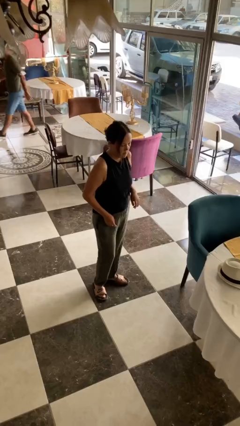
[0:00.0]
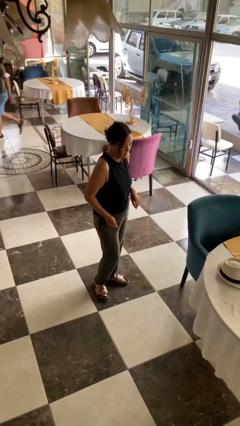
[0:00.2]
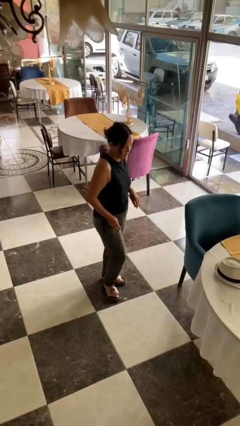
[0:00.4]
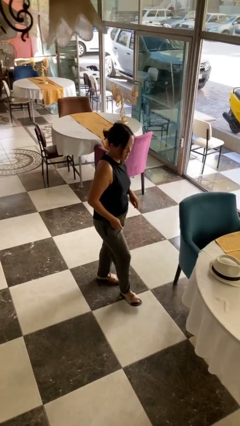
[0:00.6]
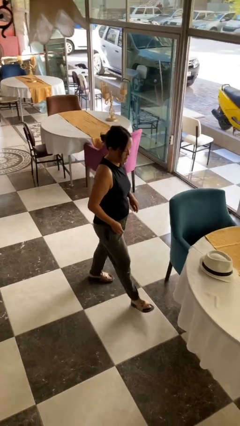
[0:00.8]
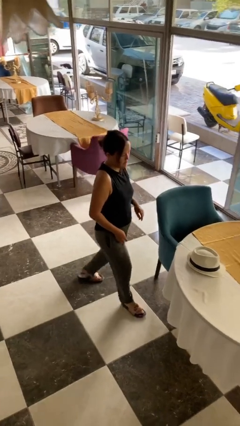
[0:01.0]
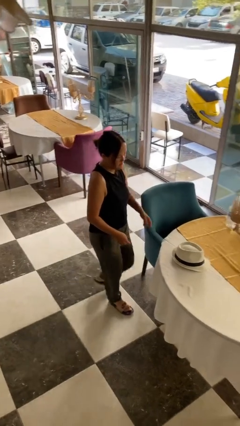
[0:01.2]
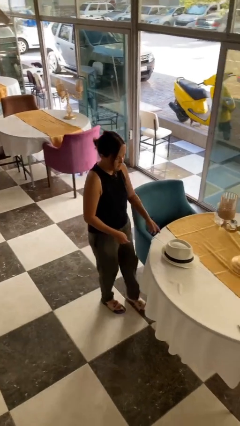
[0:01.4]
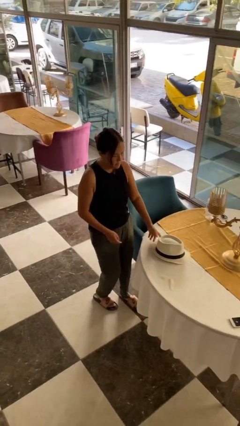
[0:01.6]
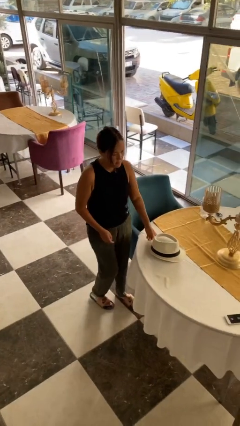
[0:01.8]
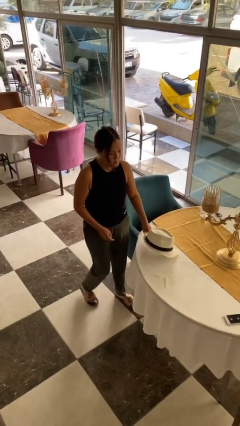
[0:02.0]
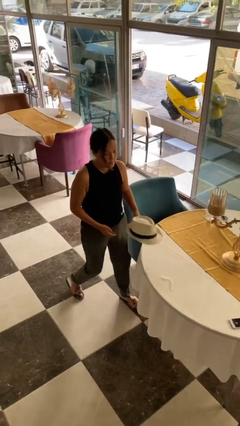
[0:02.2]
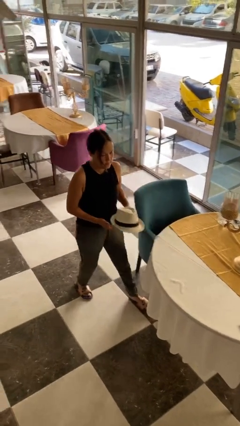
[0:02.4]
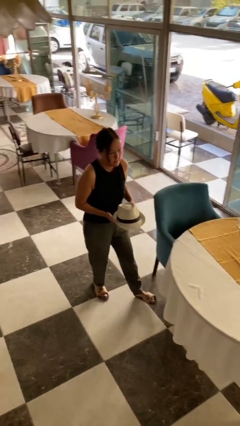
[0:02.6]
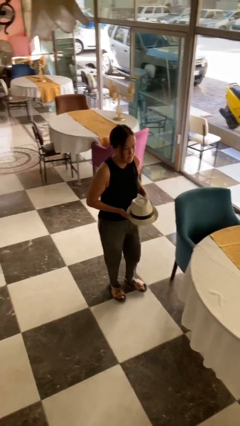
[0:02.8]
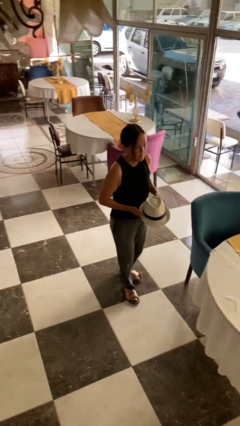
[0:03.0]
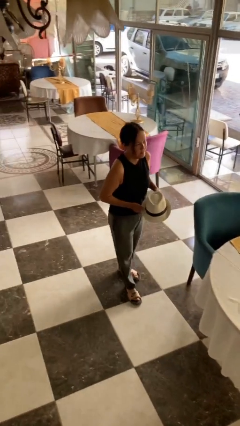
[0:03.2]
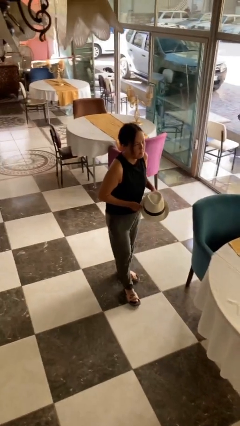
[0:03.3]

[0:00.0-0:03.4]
person picks up object from table

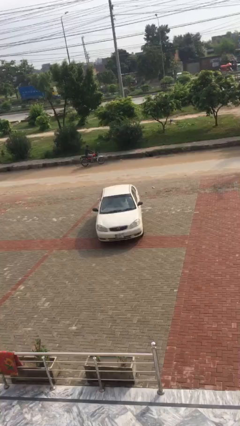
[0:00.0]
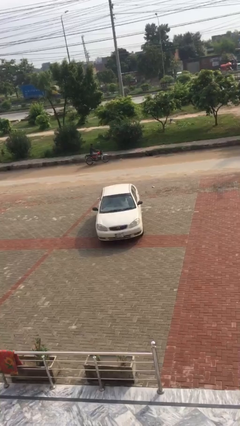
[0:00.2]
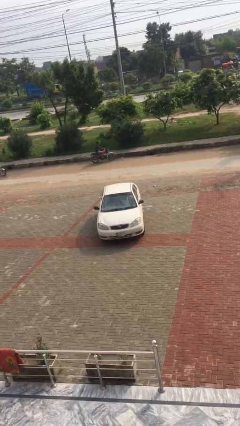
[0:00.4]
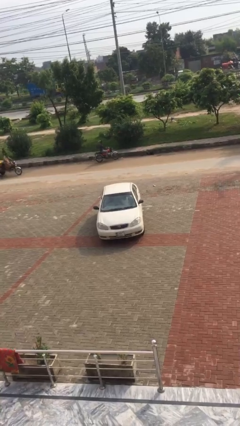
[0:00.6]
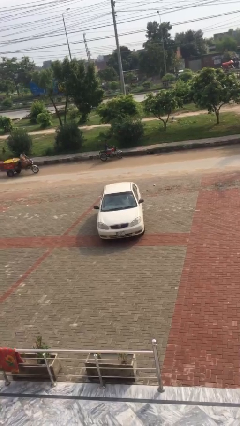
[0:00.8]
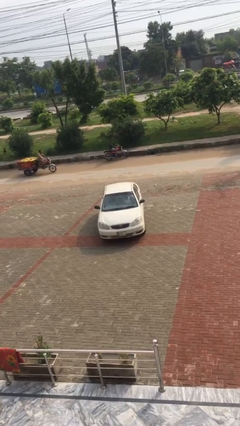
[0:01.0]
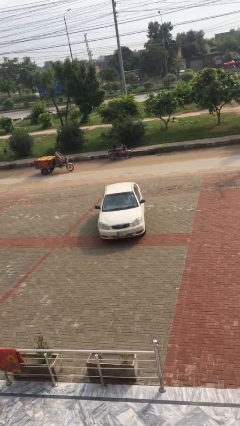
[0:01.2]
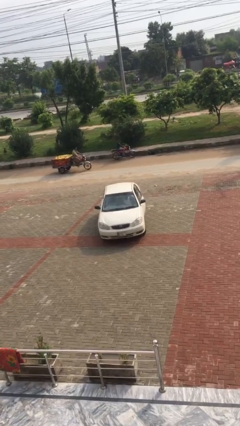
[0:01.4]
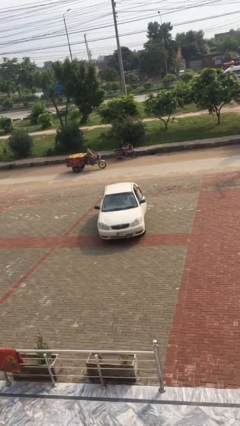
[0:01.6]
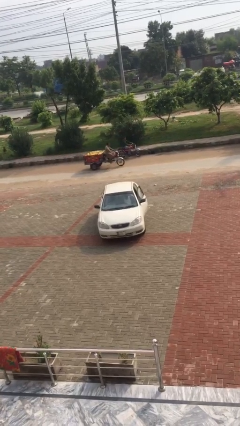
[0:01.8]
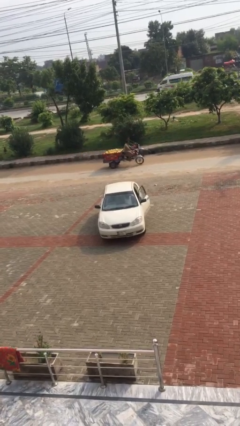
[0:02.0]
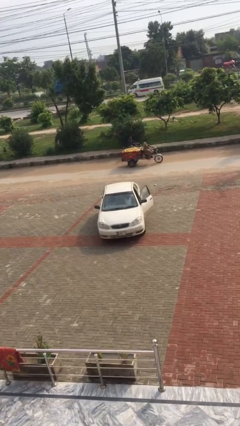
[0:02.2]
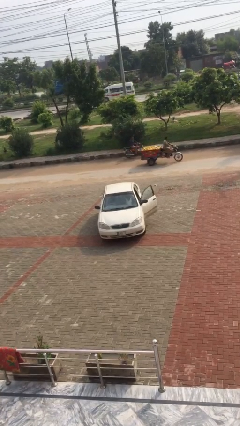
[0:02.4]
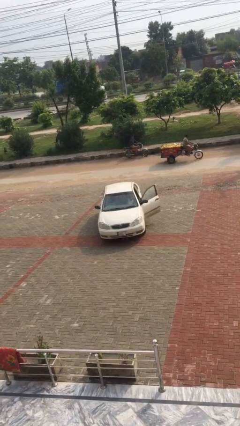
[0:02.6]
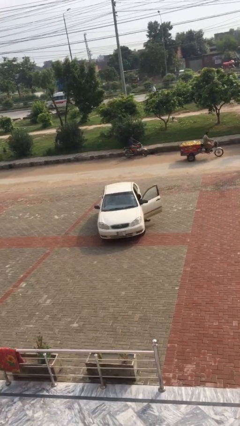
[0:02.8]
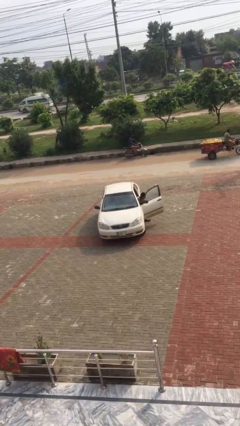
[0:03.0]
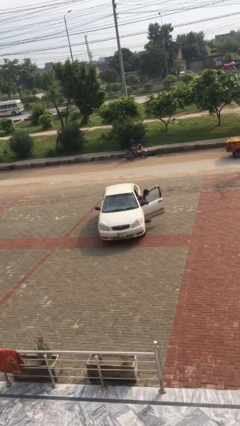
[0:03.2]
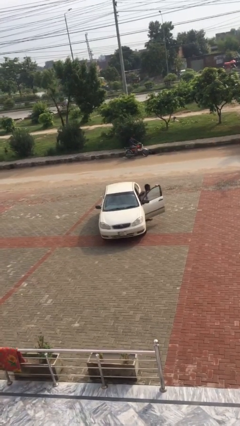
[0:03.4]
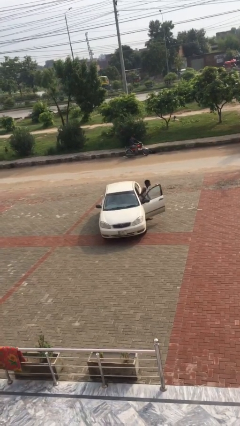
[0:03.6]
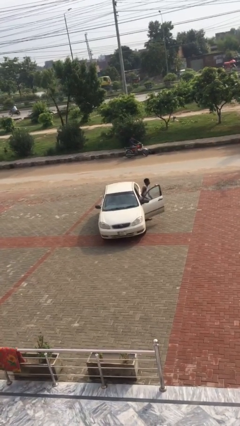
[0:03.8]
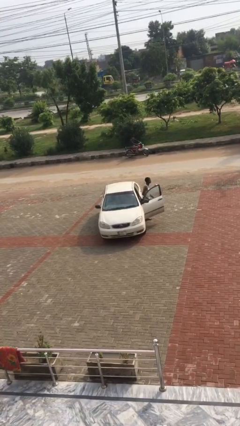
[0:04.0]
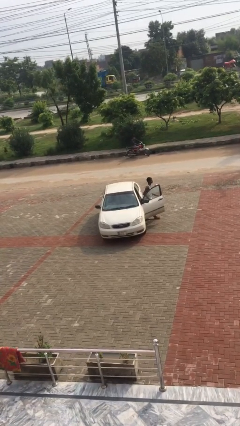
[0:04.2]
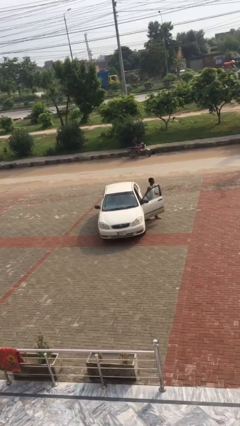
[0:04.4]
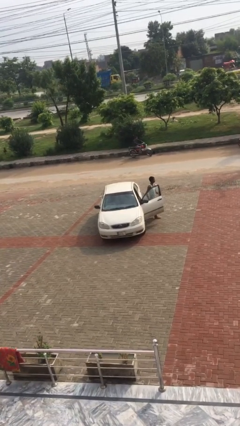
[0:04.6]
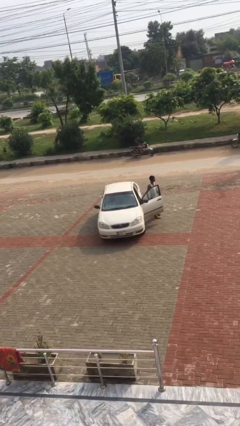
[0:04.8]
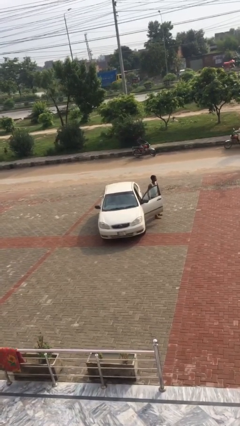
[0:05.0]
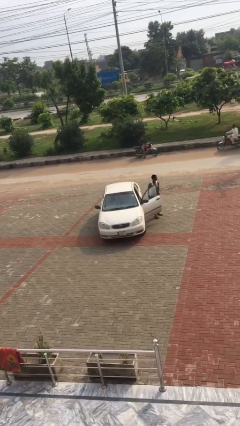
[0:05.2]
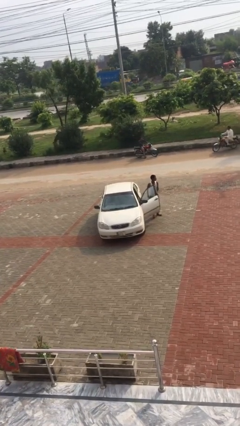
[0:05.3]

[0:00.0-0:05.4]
car drops off person

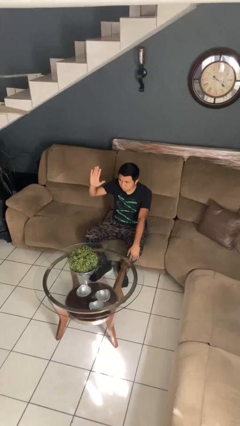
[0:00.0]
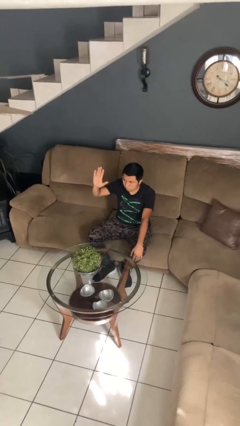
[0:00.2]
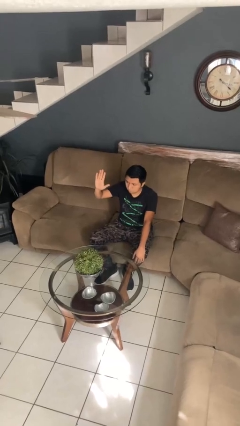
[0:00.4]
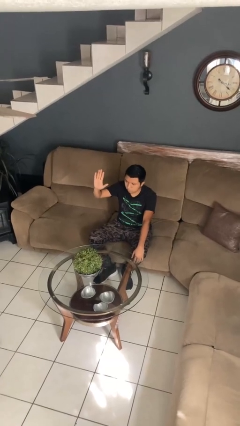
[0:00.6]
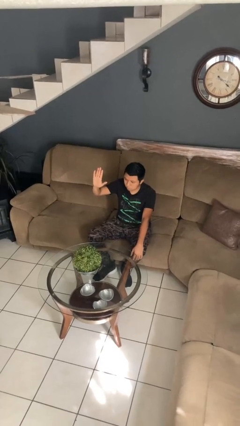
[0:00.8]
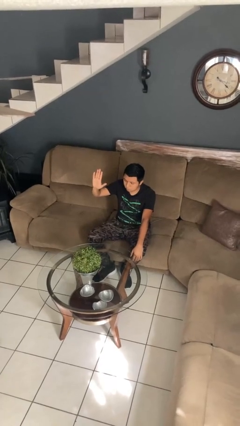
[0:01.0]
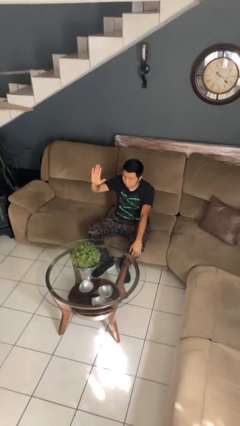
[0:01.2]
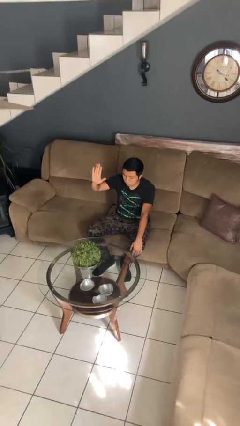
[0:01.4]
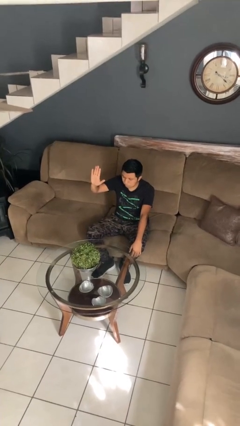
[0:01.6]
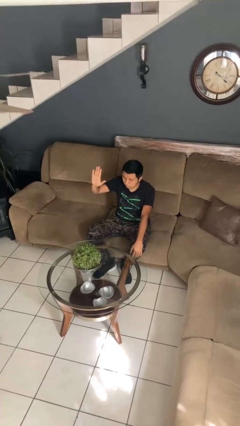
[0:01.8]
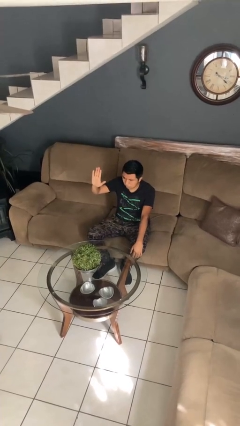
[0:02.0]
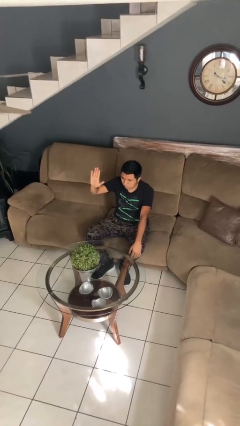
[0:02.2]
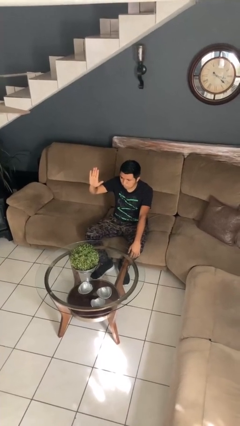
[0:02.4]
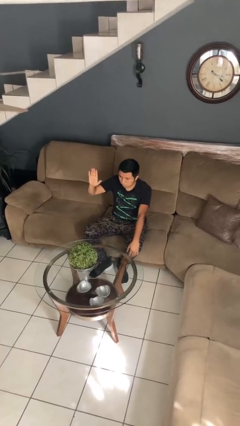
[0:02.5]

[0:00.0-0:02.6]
person gestures stop

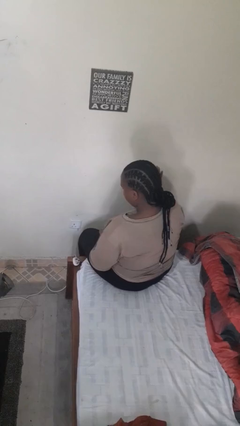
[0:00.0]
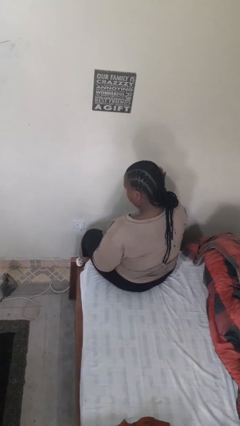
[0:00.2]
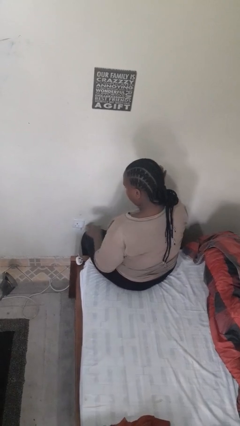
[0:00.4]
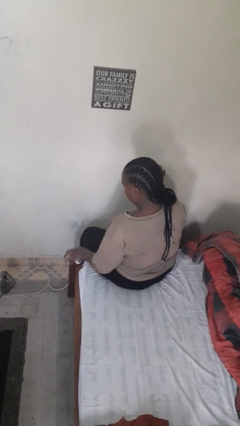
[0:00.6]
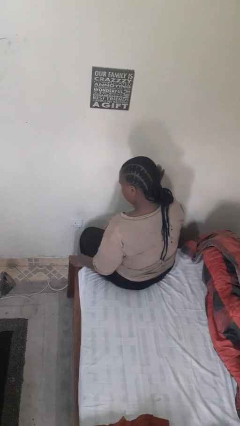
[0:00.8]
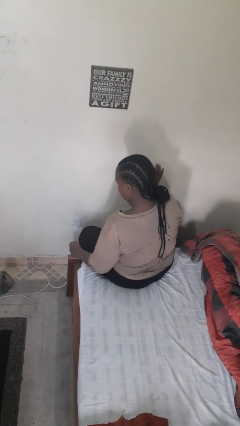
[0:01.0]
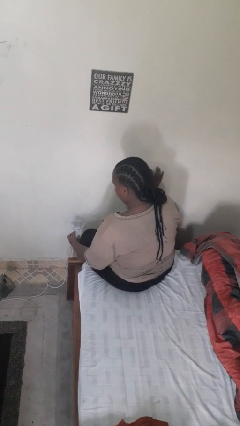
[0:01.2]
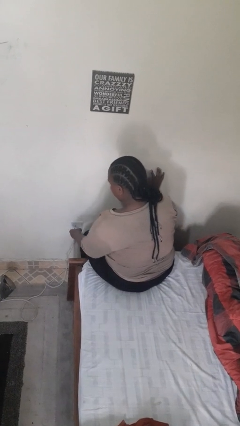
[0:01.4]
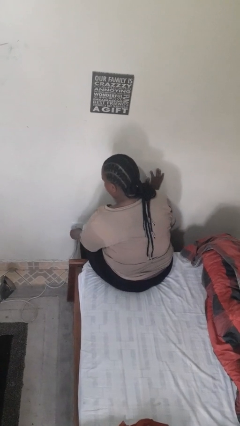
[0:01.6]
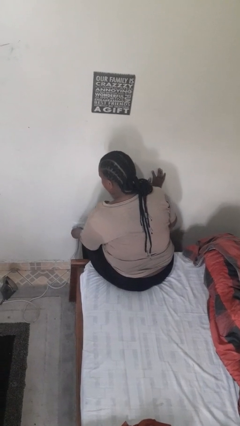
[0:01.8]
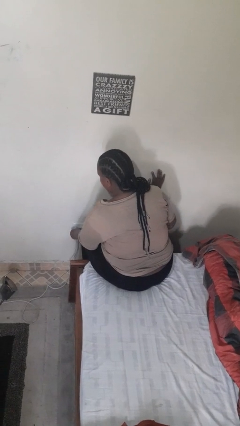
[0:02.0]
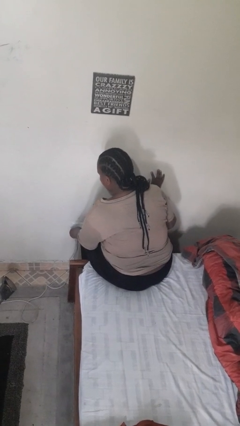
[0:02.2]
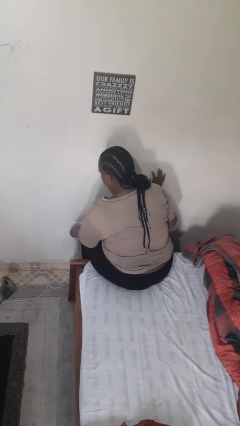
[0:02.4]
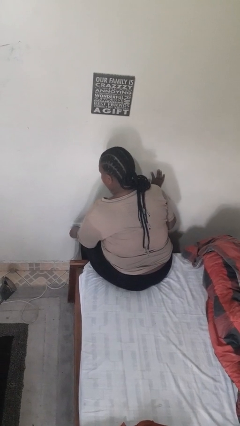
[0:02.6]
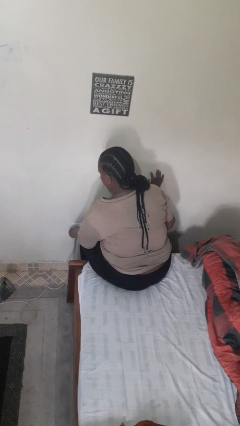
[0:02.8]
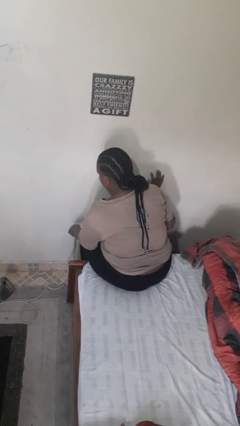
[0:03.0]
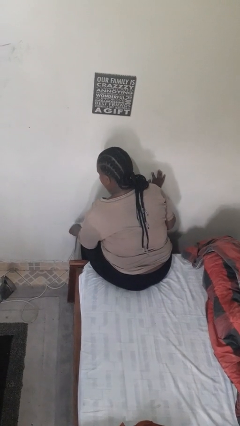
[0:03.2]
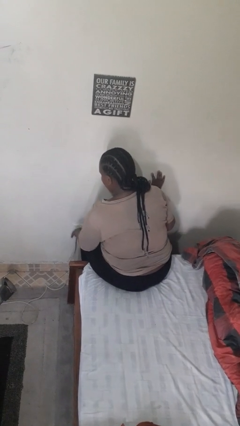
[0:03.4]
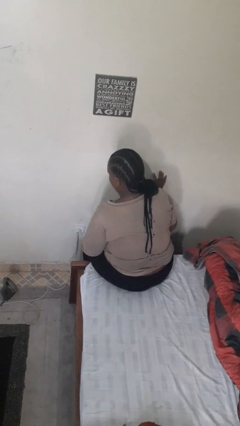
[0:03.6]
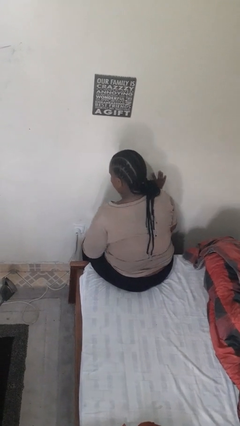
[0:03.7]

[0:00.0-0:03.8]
person plugs into electrical socket

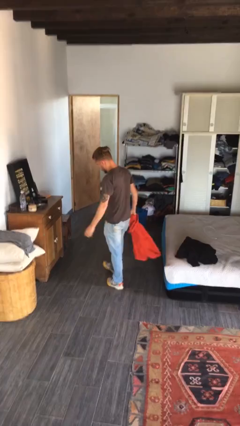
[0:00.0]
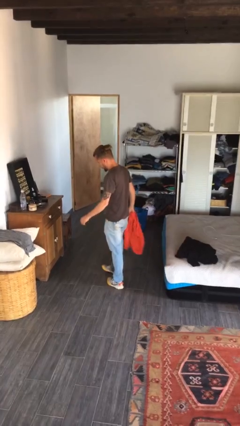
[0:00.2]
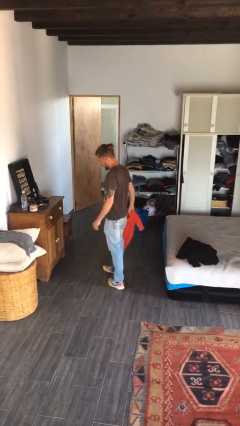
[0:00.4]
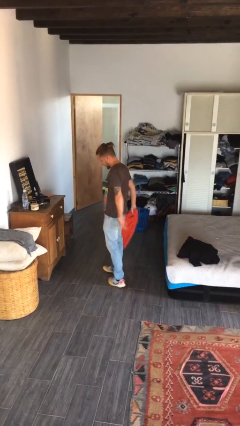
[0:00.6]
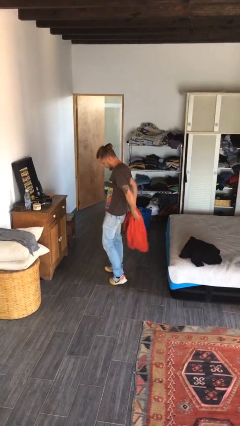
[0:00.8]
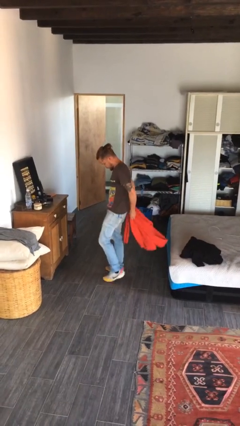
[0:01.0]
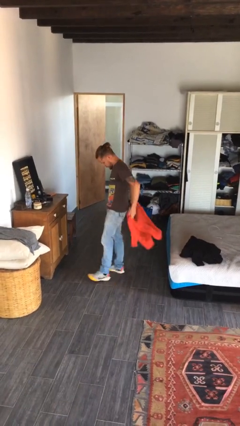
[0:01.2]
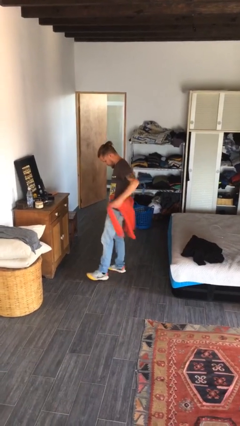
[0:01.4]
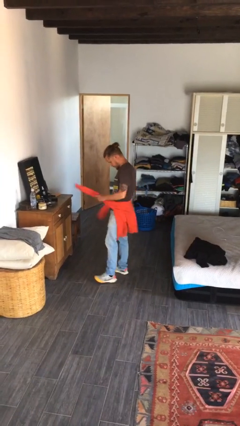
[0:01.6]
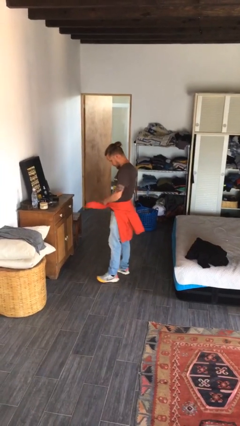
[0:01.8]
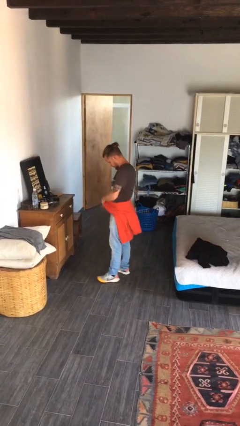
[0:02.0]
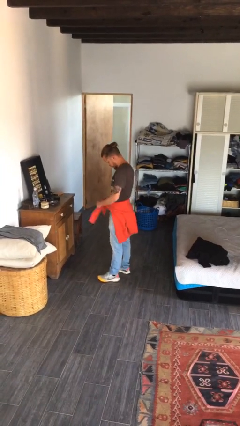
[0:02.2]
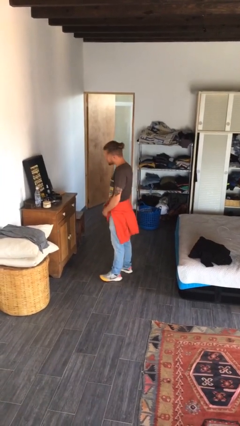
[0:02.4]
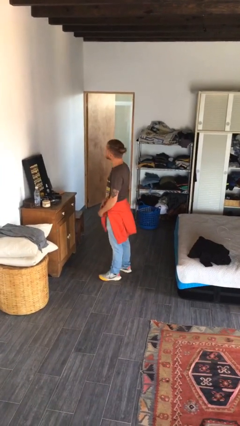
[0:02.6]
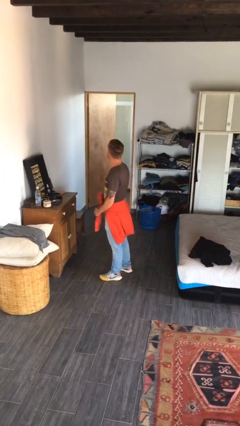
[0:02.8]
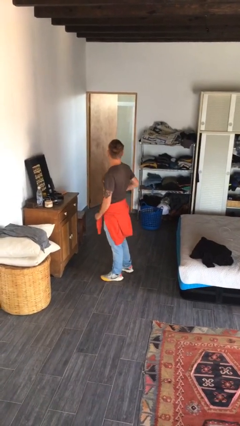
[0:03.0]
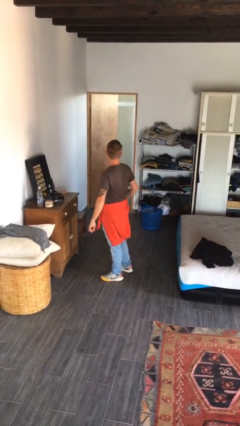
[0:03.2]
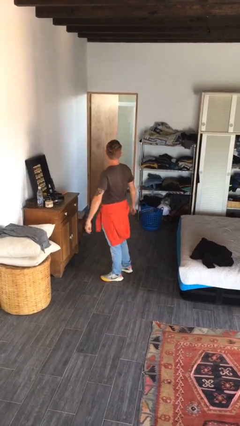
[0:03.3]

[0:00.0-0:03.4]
person ties jacket around waist
